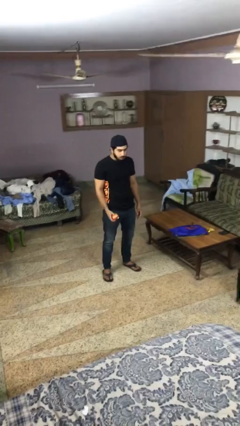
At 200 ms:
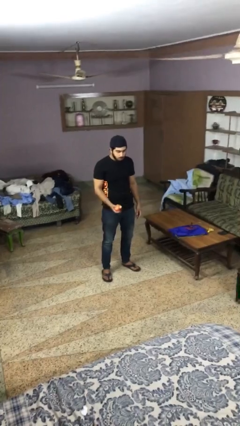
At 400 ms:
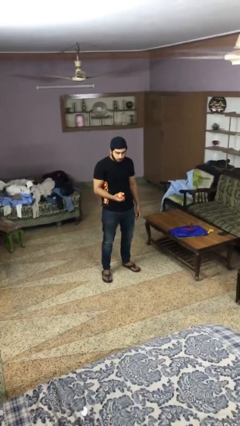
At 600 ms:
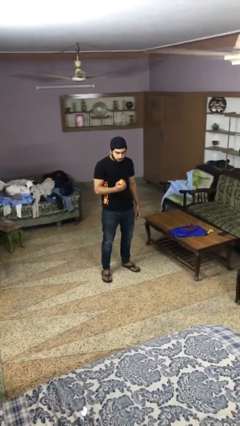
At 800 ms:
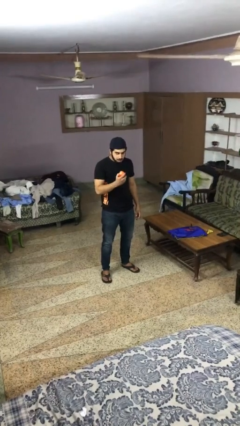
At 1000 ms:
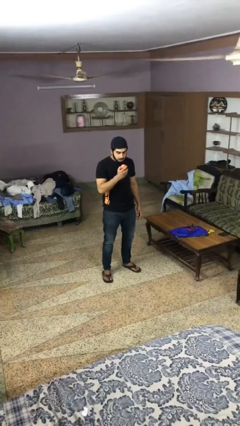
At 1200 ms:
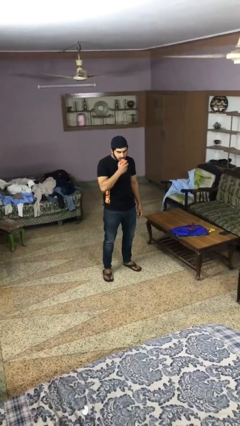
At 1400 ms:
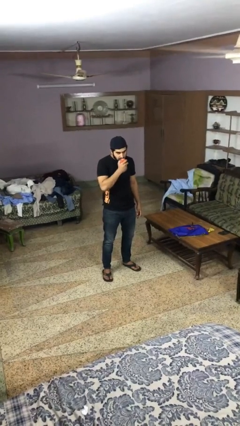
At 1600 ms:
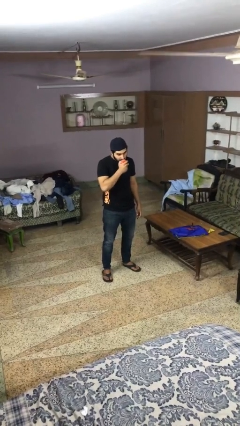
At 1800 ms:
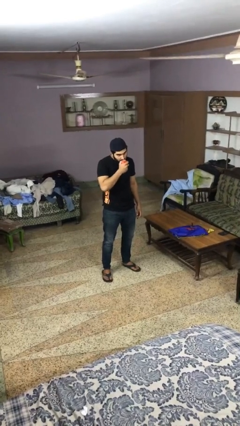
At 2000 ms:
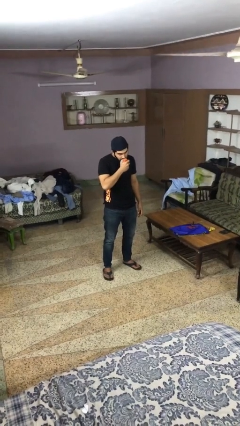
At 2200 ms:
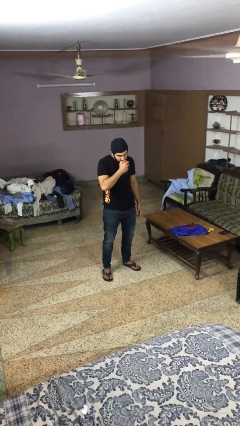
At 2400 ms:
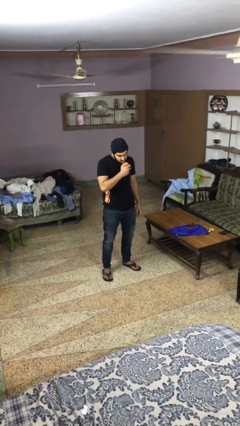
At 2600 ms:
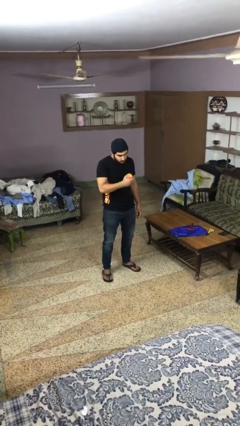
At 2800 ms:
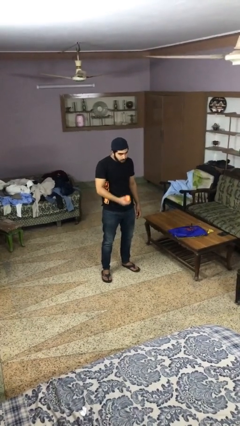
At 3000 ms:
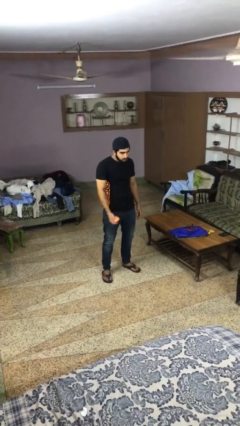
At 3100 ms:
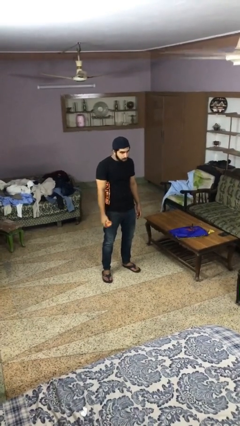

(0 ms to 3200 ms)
person eats apple

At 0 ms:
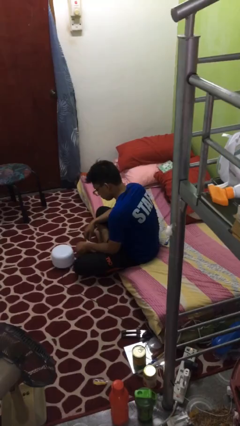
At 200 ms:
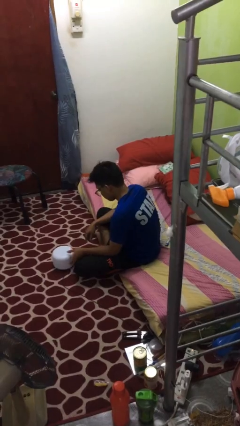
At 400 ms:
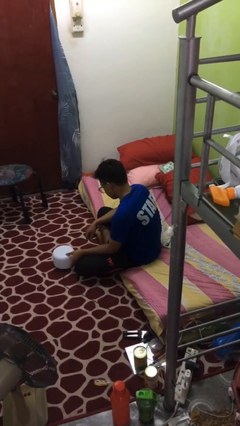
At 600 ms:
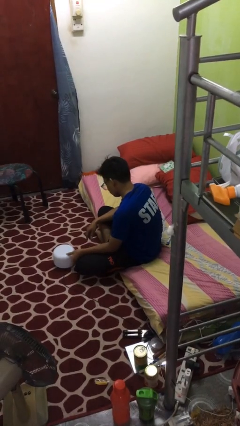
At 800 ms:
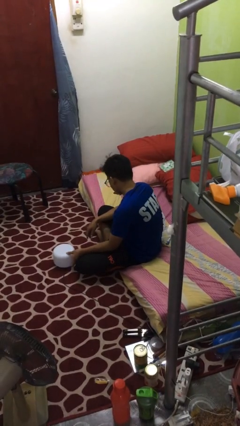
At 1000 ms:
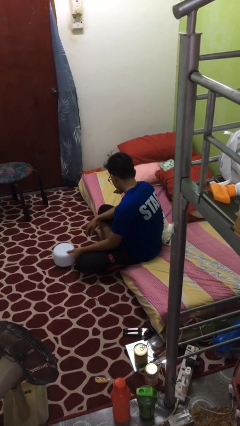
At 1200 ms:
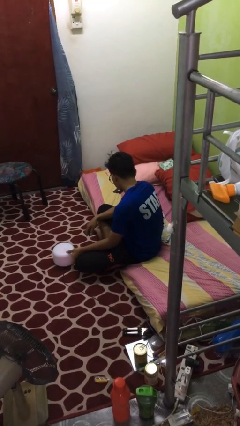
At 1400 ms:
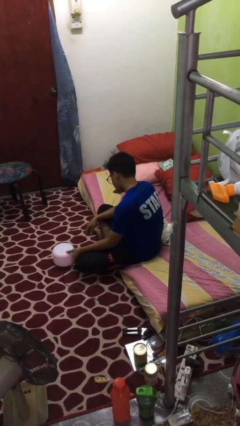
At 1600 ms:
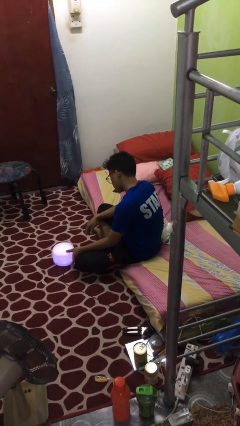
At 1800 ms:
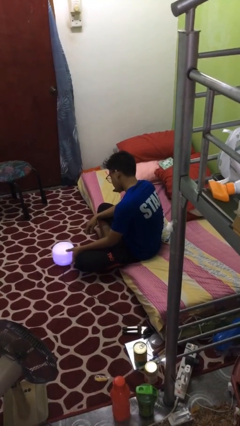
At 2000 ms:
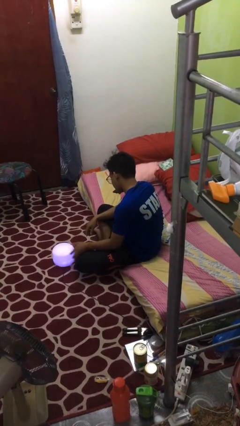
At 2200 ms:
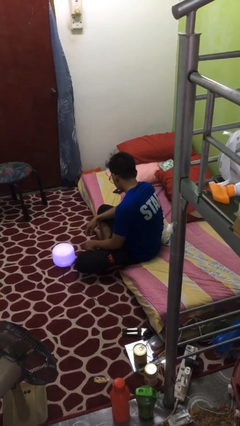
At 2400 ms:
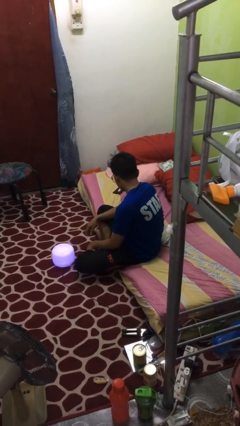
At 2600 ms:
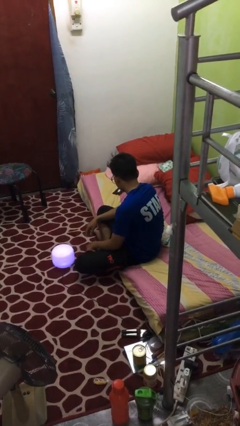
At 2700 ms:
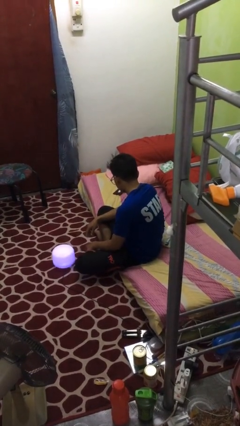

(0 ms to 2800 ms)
person turns on lamp

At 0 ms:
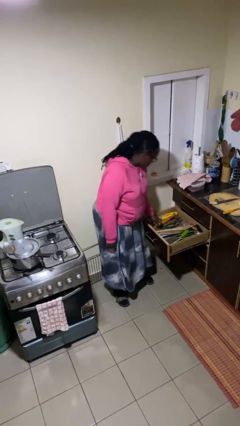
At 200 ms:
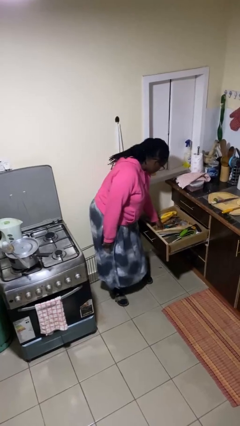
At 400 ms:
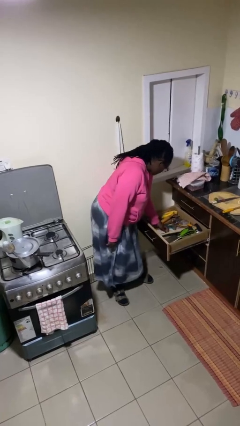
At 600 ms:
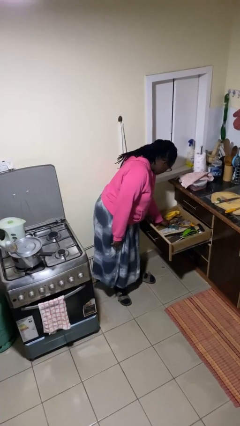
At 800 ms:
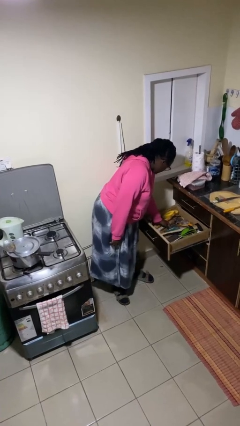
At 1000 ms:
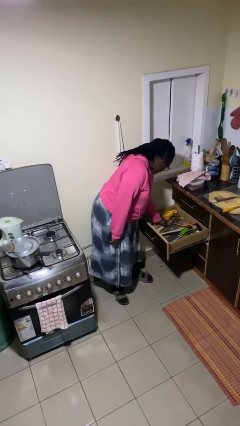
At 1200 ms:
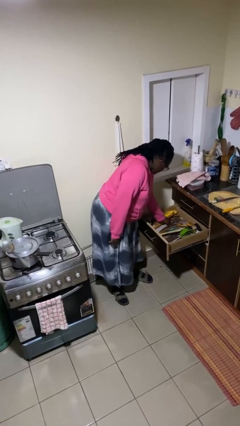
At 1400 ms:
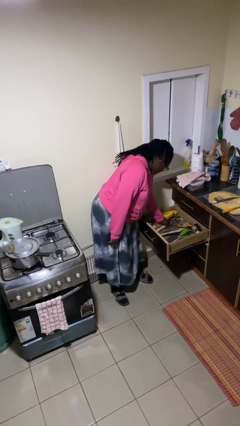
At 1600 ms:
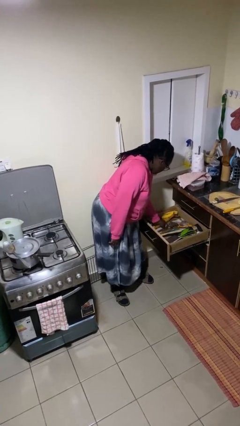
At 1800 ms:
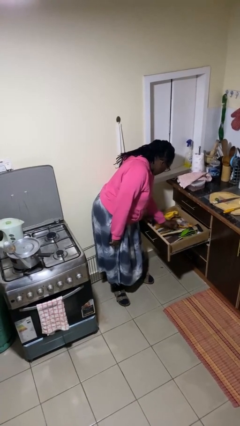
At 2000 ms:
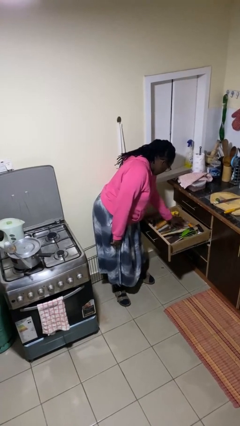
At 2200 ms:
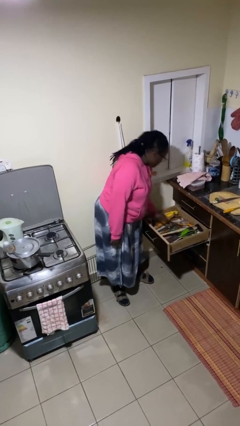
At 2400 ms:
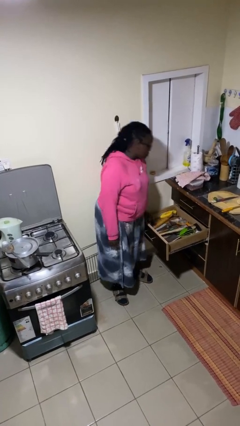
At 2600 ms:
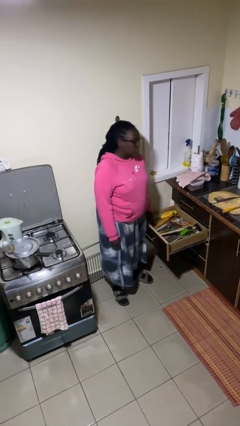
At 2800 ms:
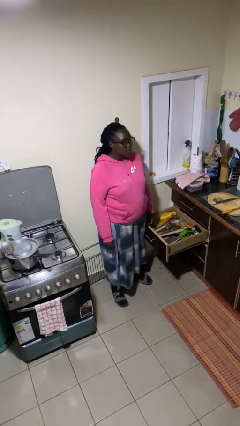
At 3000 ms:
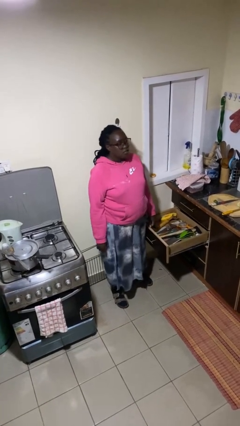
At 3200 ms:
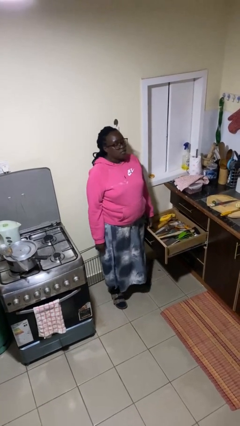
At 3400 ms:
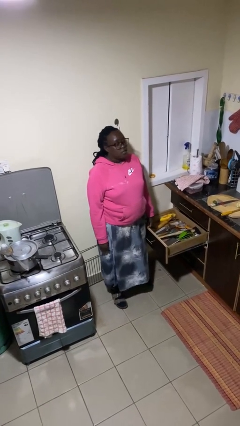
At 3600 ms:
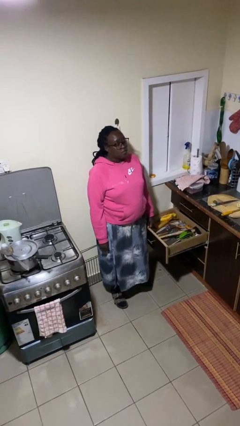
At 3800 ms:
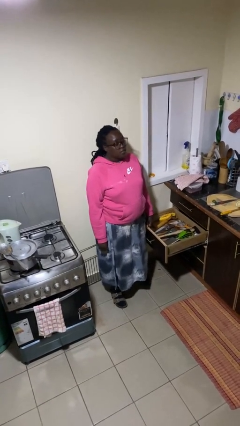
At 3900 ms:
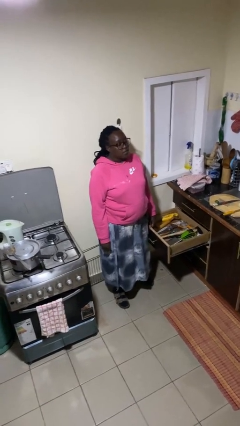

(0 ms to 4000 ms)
person searches in kitchen drawer

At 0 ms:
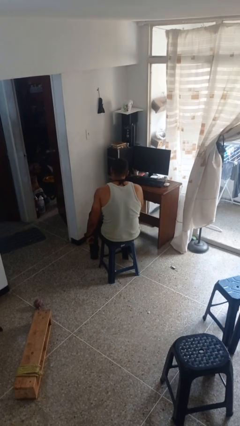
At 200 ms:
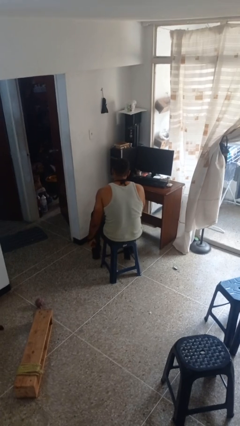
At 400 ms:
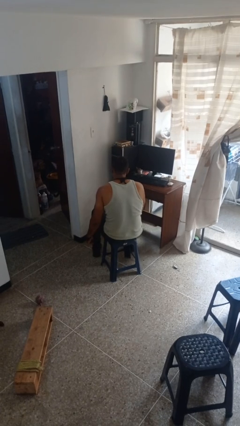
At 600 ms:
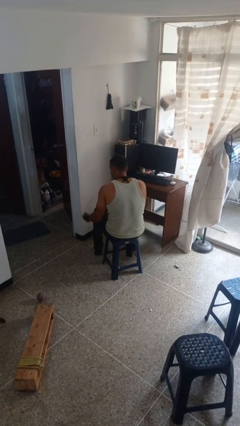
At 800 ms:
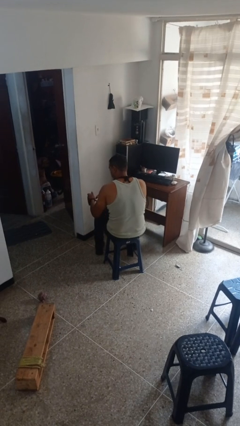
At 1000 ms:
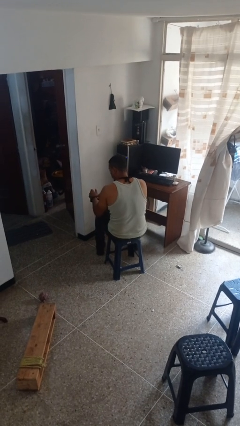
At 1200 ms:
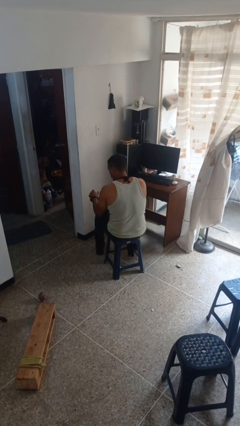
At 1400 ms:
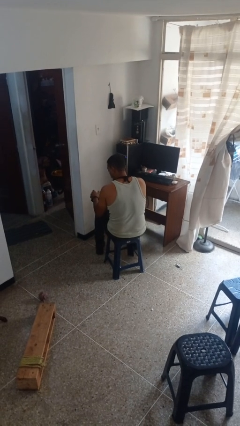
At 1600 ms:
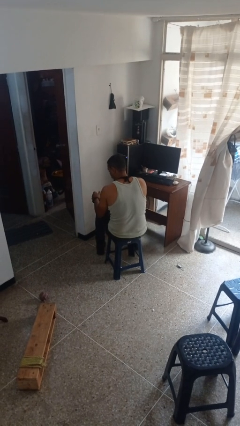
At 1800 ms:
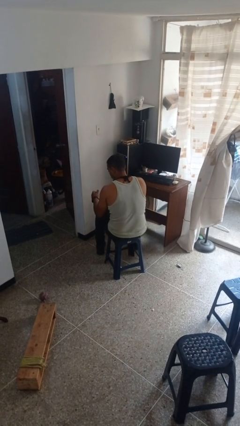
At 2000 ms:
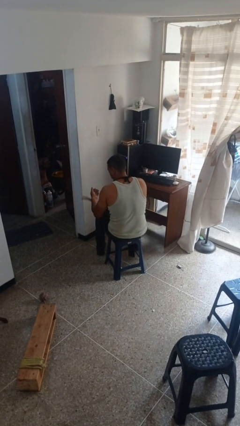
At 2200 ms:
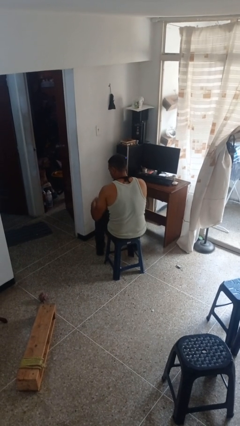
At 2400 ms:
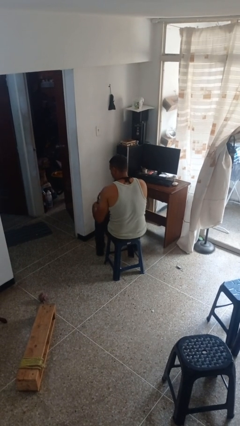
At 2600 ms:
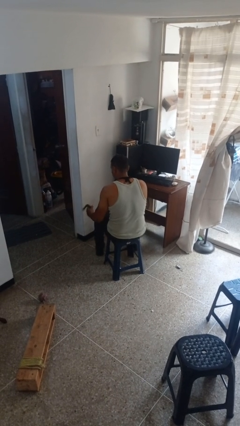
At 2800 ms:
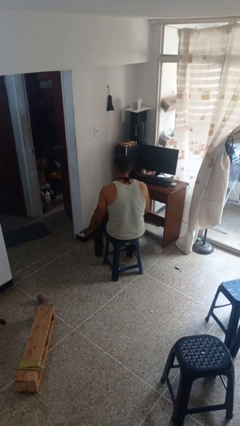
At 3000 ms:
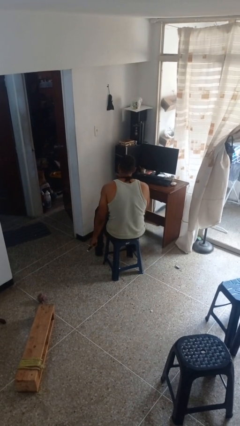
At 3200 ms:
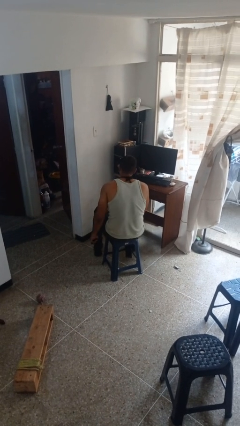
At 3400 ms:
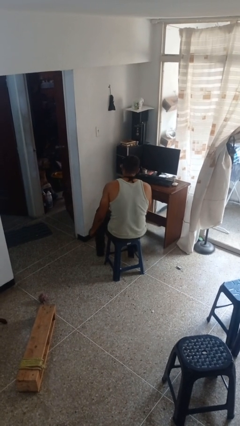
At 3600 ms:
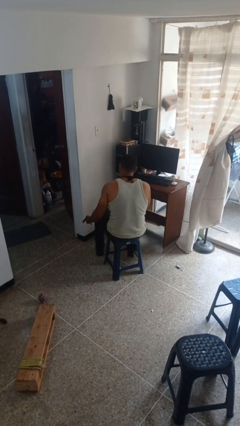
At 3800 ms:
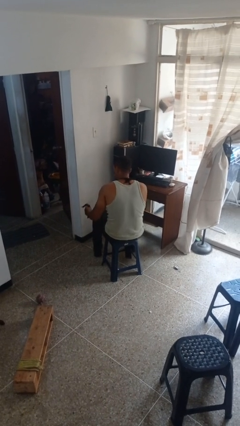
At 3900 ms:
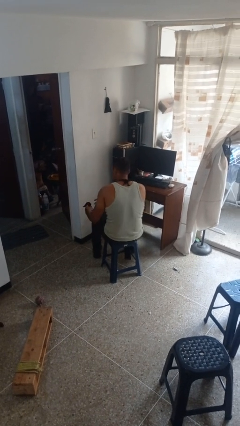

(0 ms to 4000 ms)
person takes off wristwatch

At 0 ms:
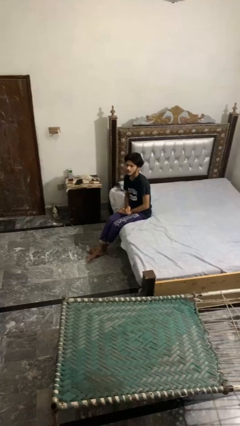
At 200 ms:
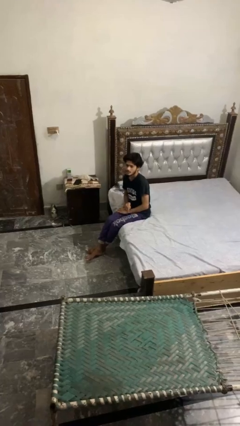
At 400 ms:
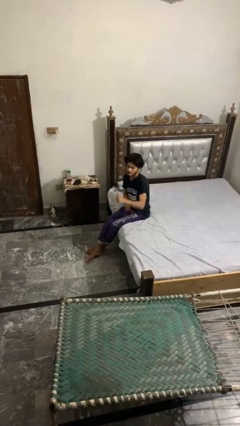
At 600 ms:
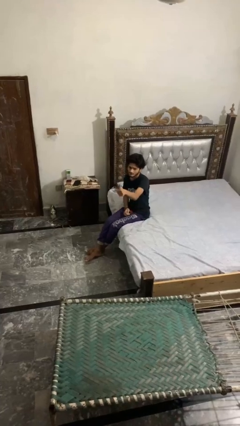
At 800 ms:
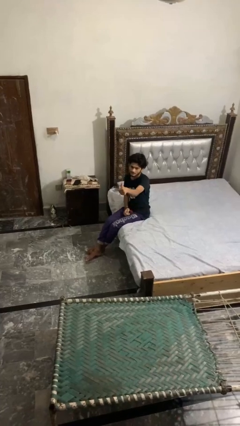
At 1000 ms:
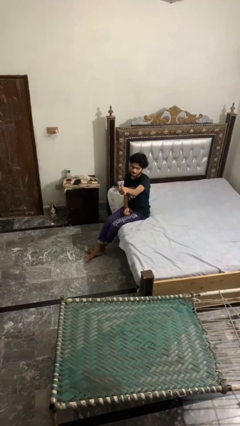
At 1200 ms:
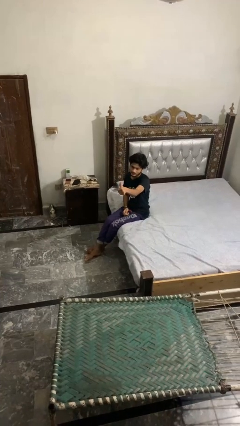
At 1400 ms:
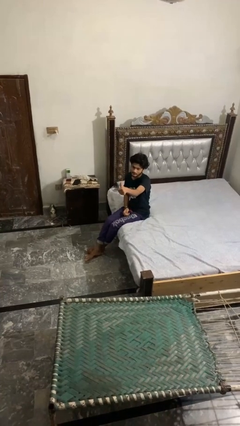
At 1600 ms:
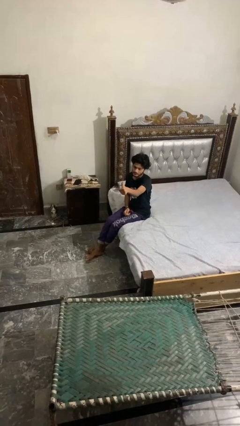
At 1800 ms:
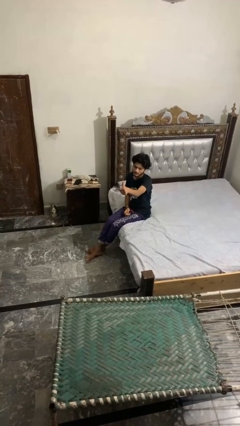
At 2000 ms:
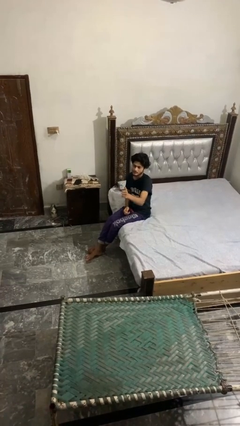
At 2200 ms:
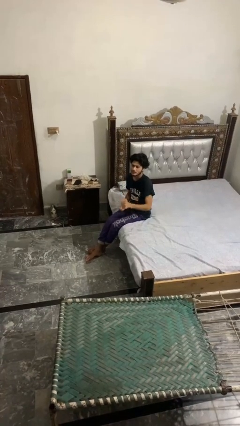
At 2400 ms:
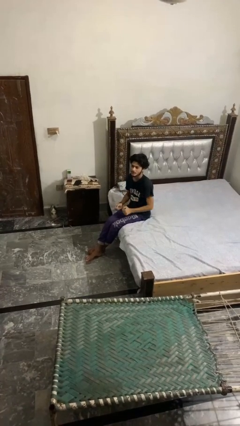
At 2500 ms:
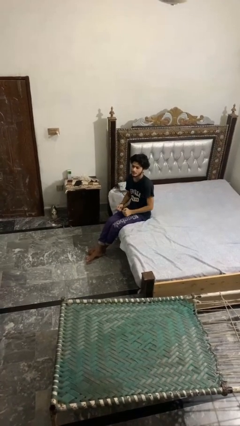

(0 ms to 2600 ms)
person gestures thumbs up

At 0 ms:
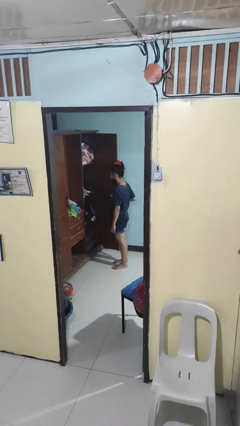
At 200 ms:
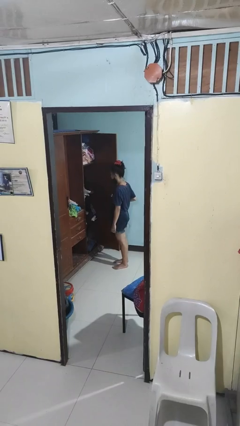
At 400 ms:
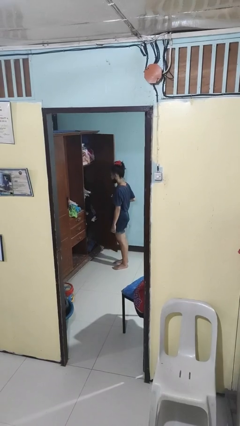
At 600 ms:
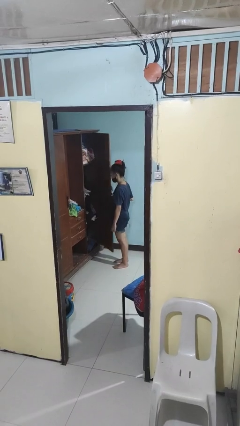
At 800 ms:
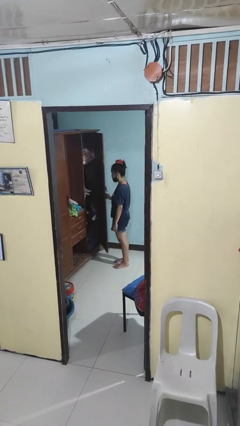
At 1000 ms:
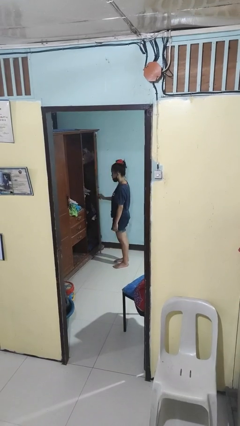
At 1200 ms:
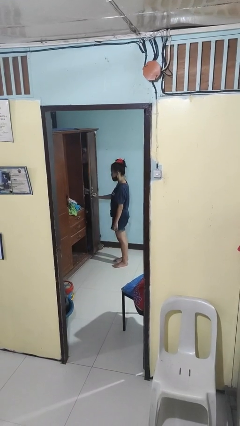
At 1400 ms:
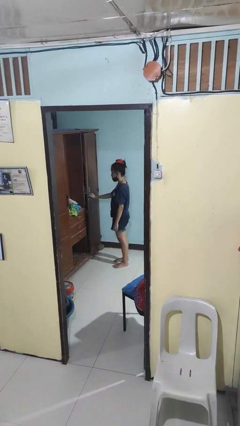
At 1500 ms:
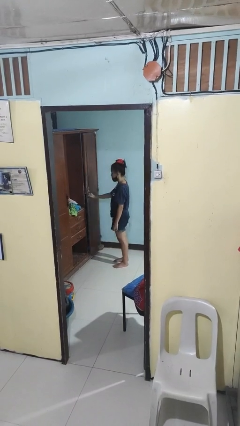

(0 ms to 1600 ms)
person closes closet door
